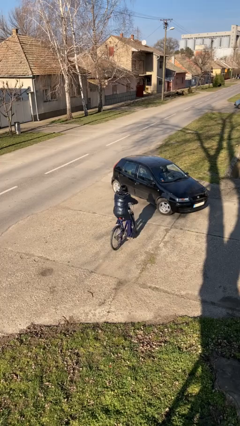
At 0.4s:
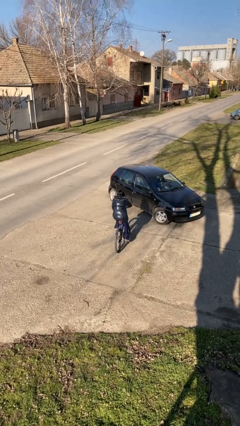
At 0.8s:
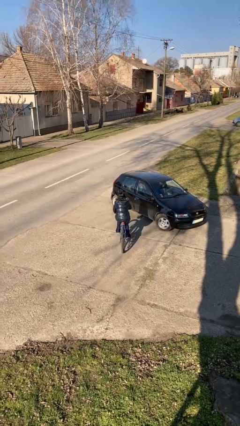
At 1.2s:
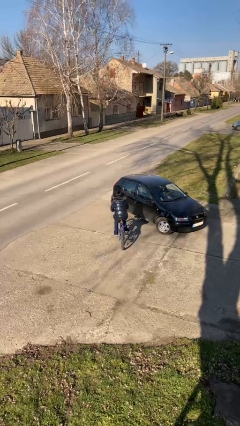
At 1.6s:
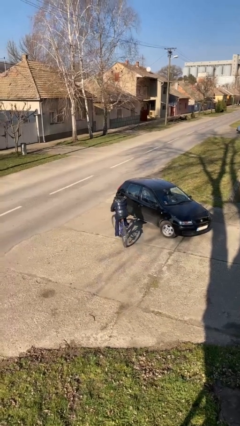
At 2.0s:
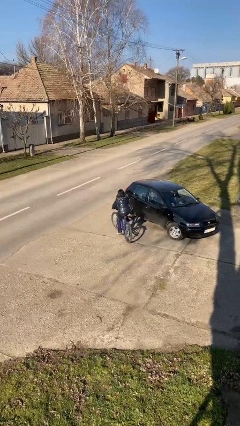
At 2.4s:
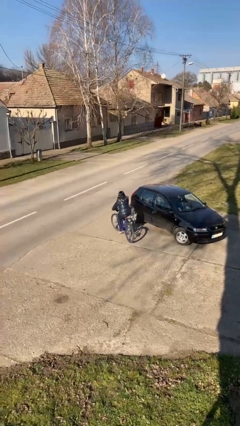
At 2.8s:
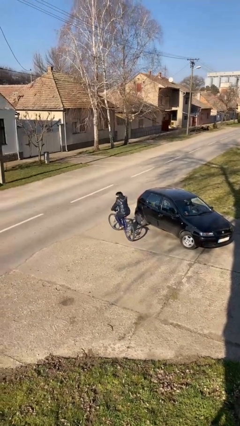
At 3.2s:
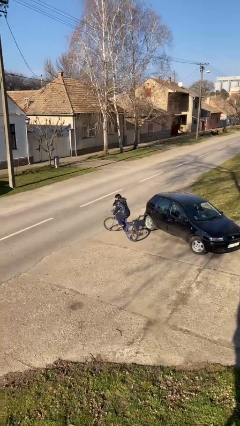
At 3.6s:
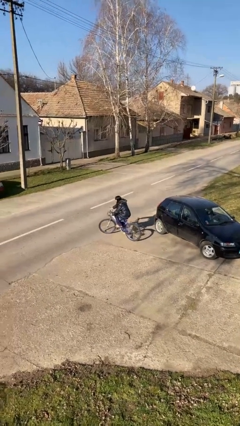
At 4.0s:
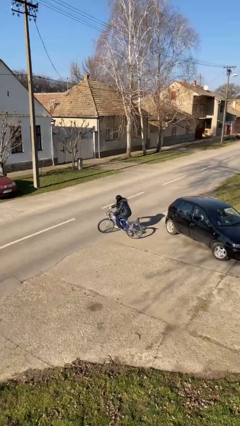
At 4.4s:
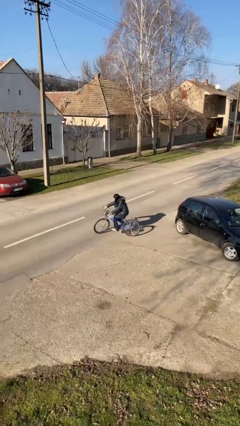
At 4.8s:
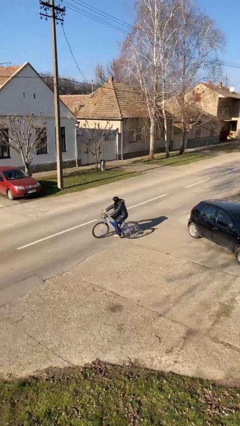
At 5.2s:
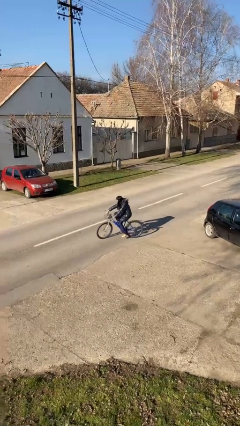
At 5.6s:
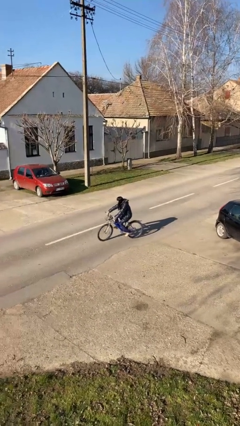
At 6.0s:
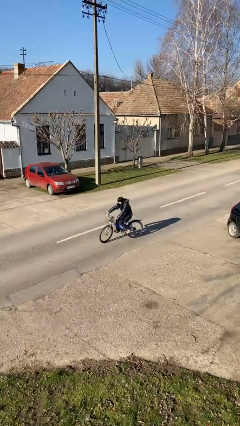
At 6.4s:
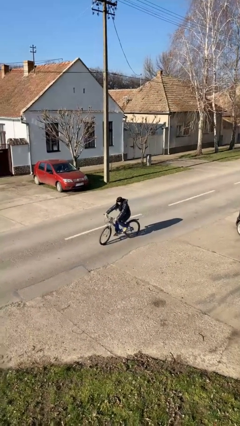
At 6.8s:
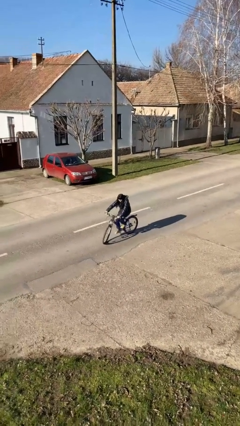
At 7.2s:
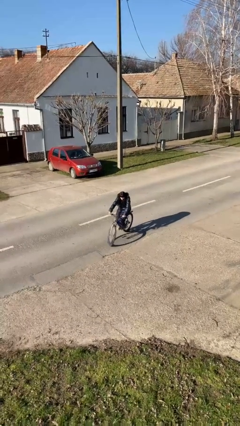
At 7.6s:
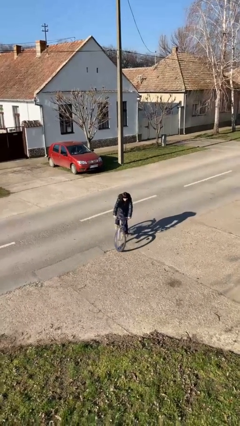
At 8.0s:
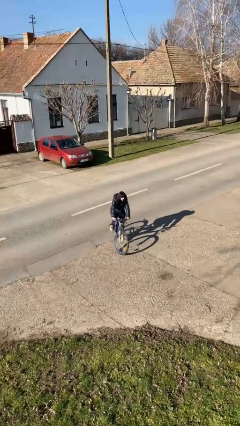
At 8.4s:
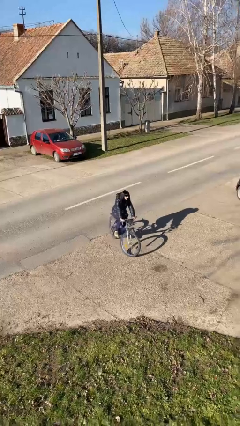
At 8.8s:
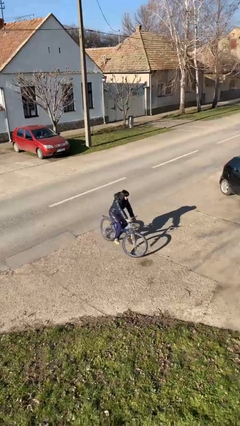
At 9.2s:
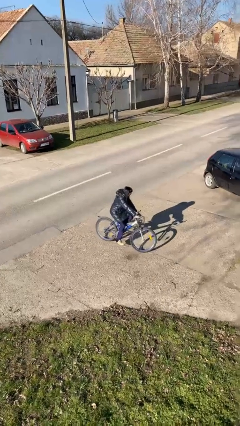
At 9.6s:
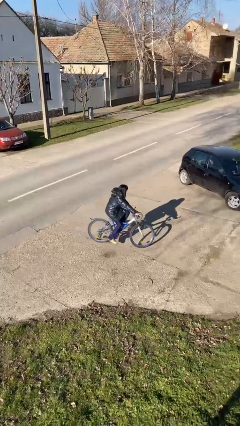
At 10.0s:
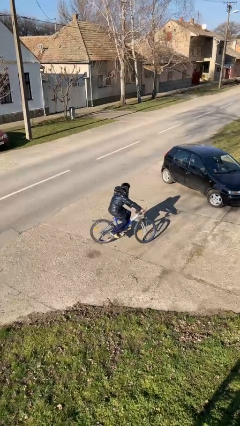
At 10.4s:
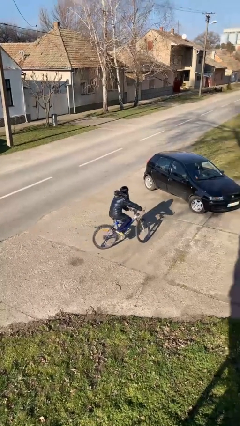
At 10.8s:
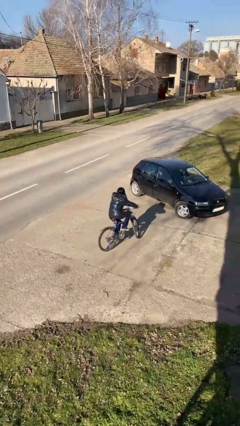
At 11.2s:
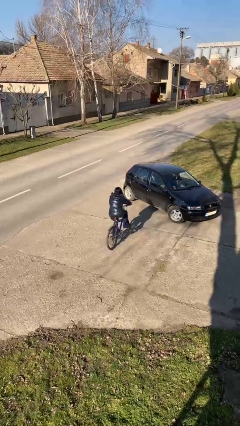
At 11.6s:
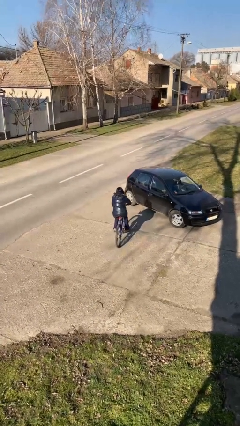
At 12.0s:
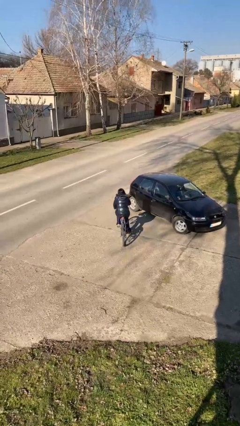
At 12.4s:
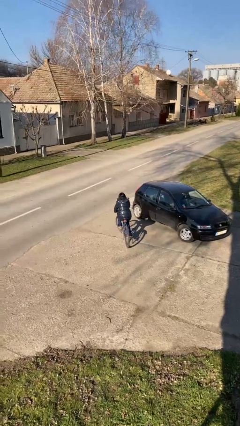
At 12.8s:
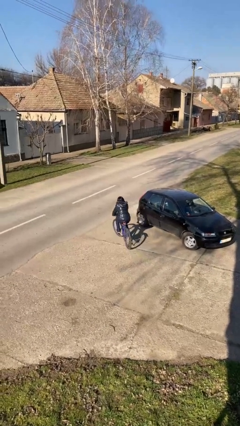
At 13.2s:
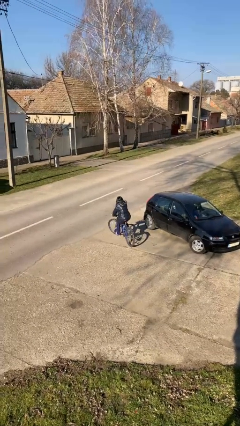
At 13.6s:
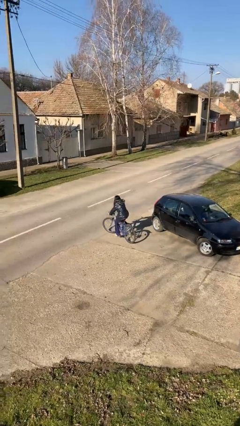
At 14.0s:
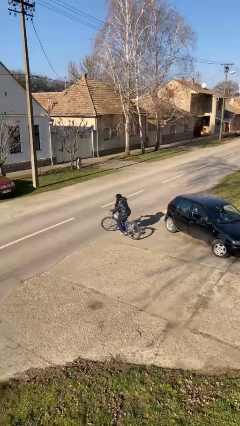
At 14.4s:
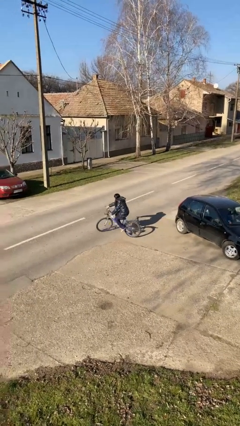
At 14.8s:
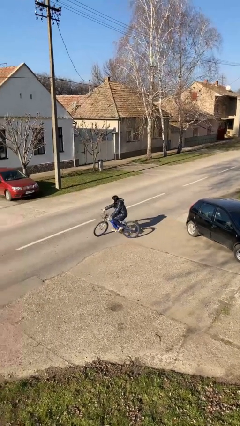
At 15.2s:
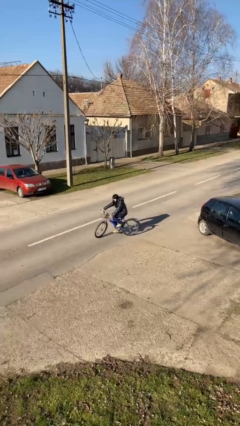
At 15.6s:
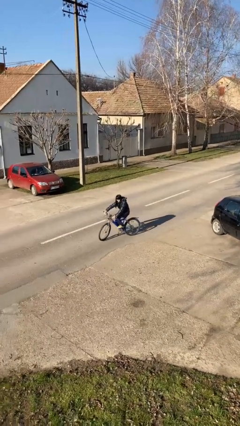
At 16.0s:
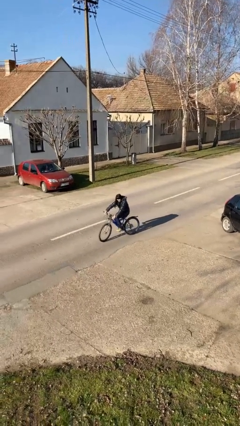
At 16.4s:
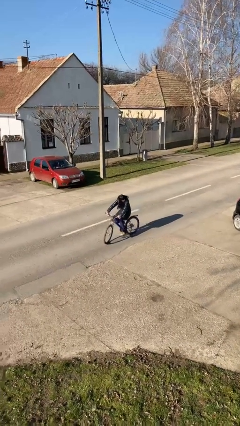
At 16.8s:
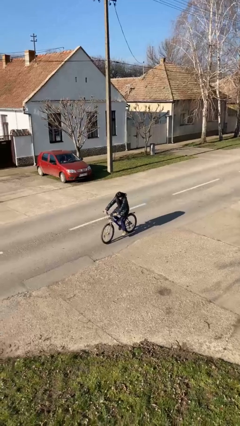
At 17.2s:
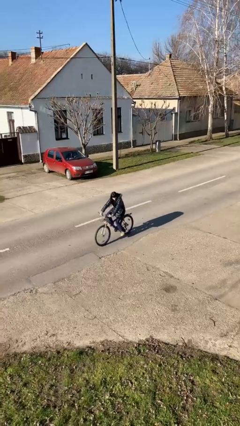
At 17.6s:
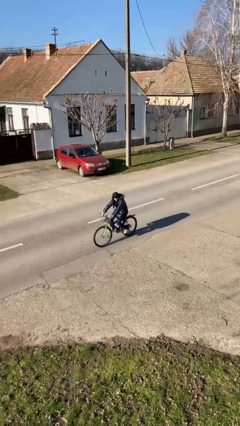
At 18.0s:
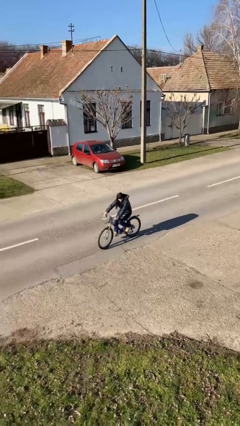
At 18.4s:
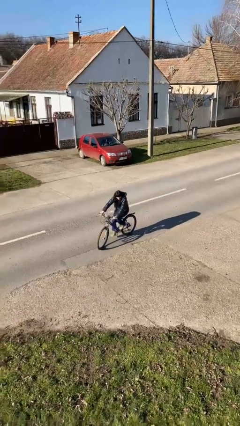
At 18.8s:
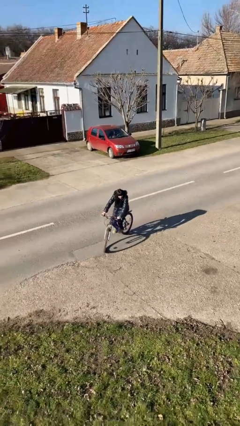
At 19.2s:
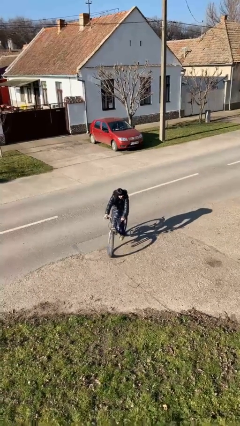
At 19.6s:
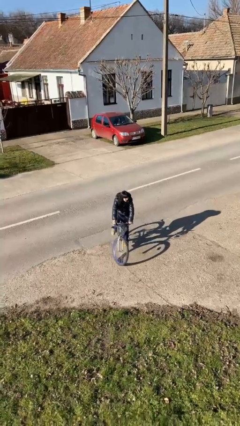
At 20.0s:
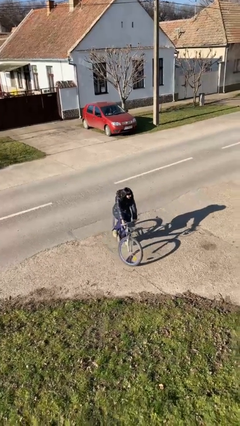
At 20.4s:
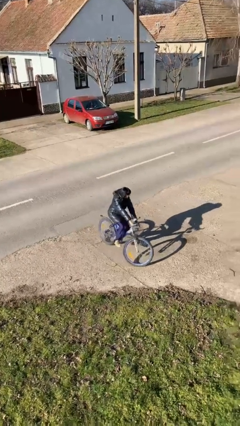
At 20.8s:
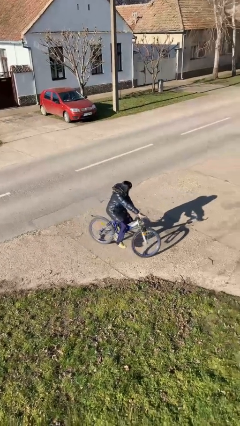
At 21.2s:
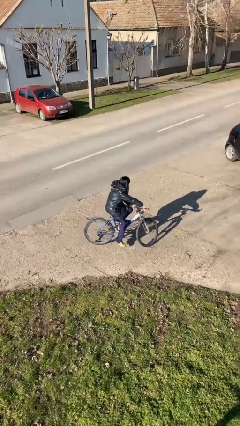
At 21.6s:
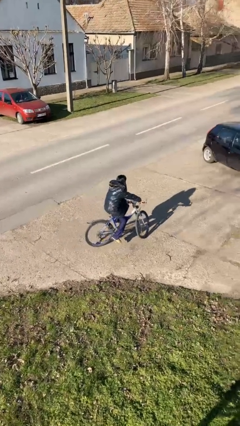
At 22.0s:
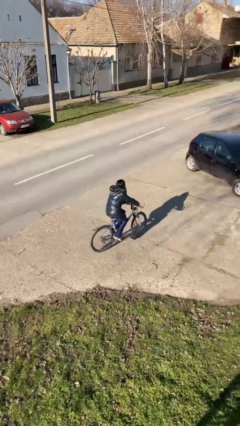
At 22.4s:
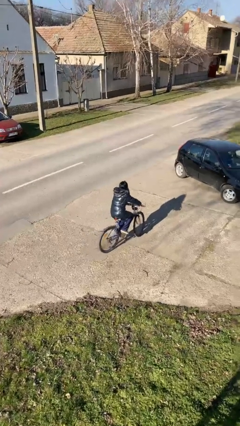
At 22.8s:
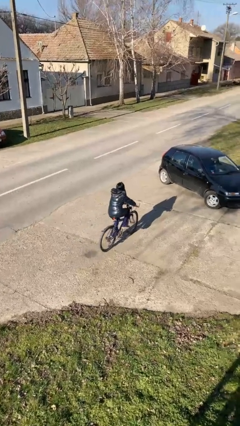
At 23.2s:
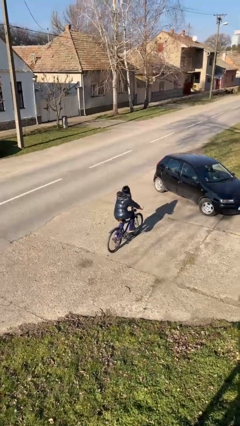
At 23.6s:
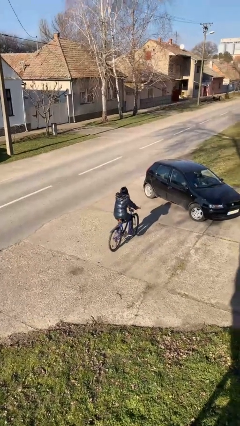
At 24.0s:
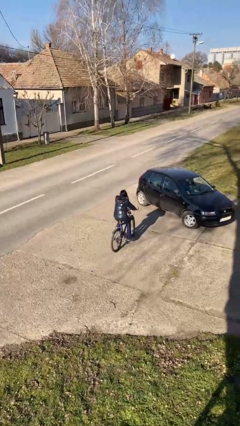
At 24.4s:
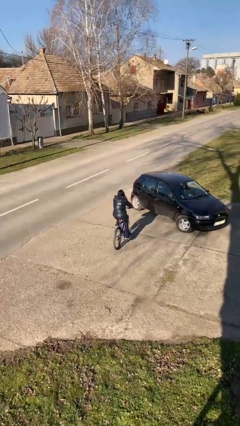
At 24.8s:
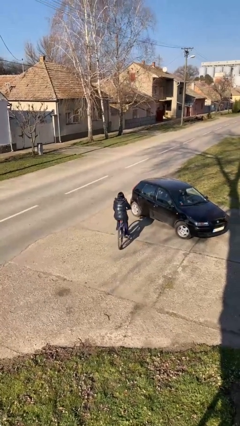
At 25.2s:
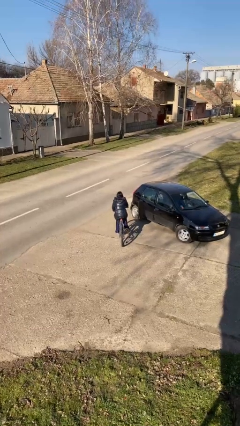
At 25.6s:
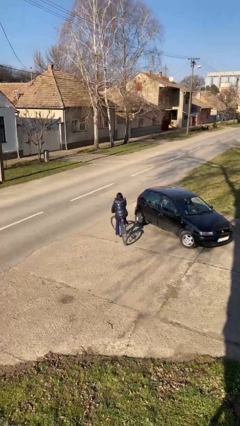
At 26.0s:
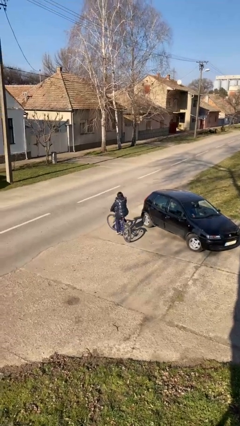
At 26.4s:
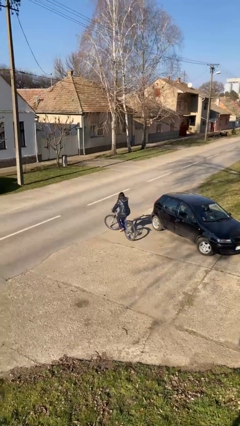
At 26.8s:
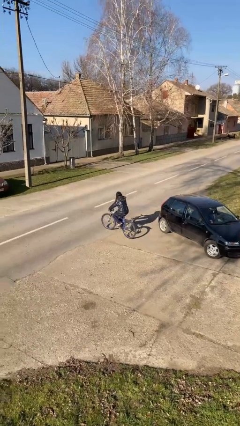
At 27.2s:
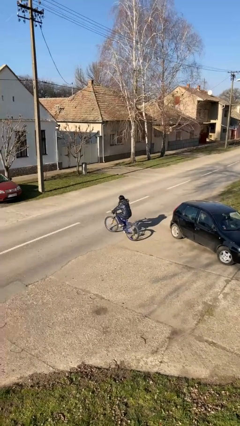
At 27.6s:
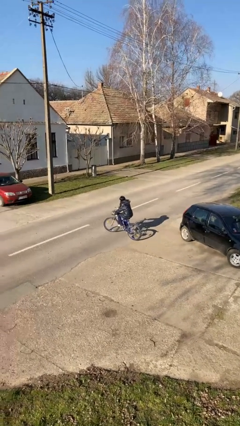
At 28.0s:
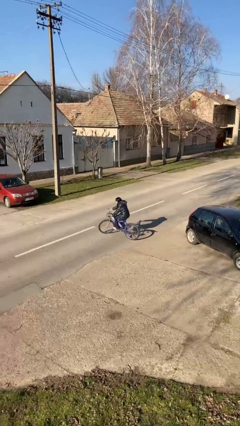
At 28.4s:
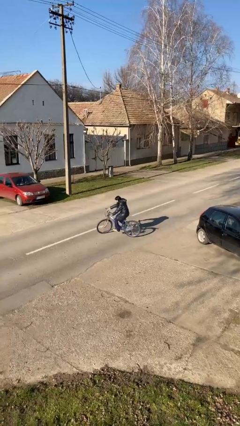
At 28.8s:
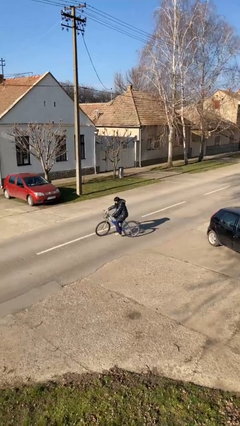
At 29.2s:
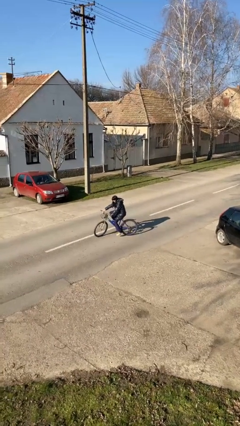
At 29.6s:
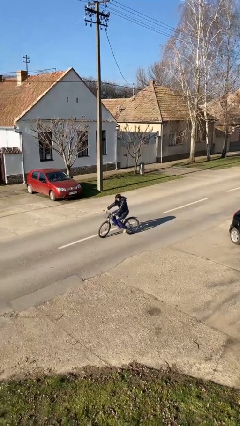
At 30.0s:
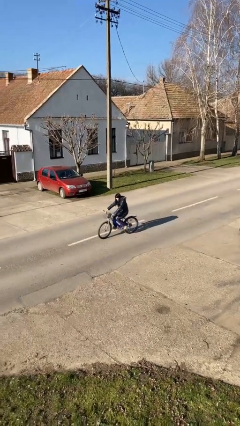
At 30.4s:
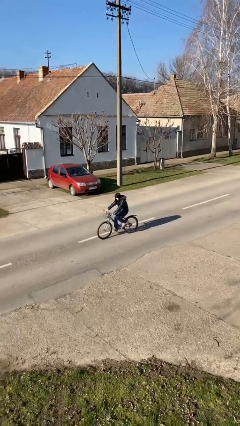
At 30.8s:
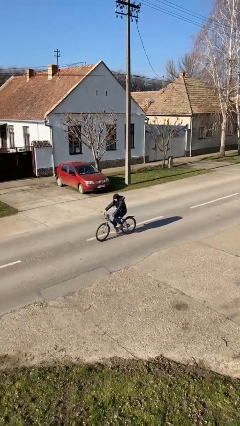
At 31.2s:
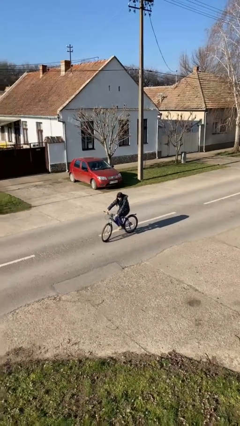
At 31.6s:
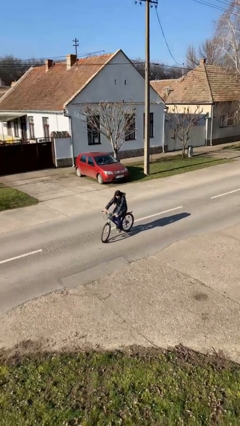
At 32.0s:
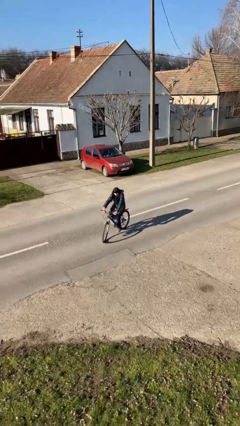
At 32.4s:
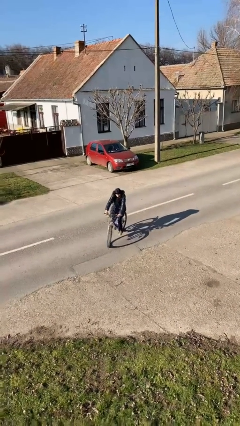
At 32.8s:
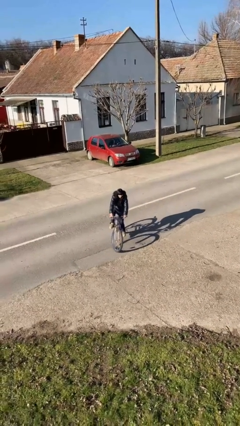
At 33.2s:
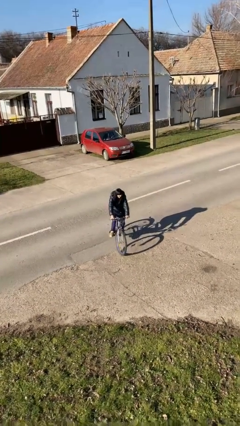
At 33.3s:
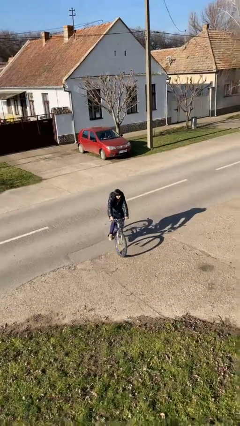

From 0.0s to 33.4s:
person rides bicycle

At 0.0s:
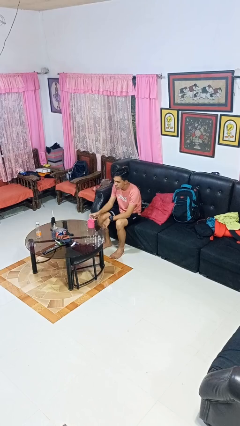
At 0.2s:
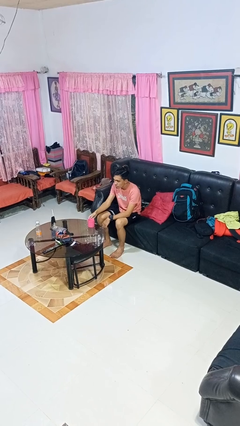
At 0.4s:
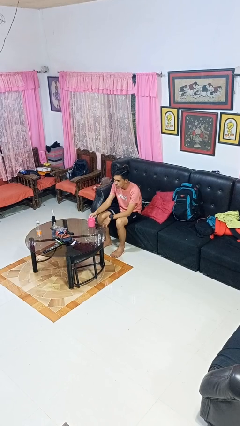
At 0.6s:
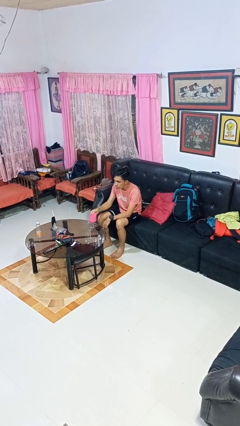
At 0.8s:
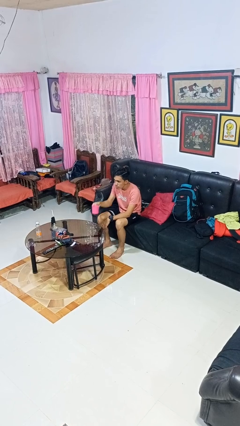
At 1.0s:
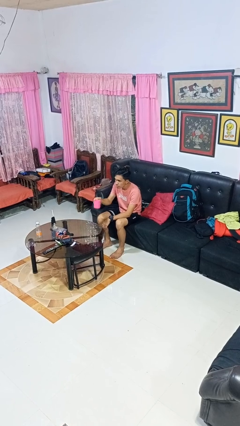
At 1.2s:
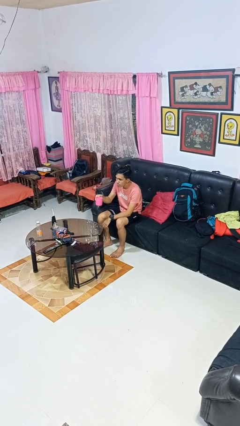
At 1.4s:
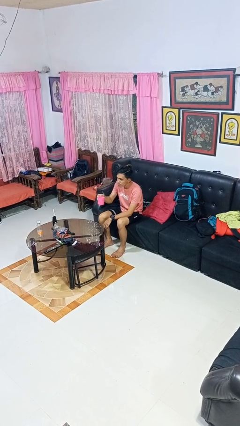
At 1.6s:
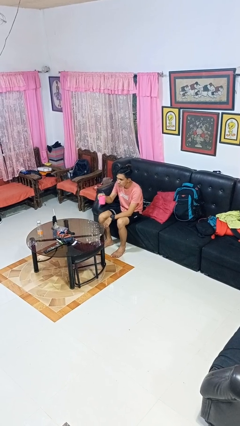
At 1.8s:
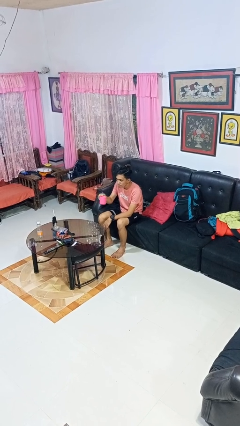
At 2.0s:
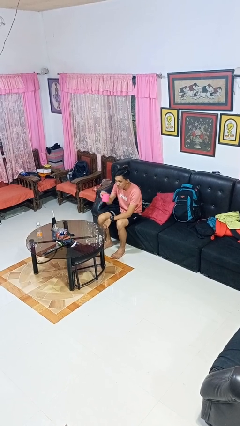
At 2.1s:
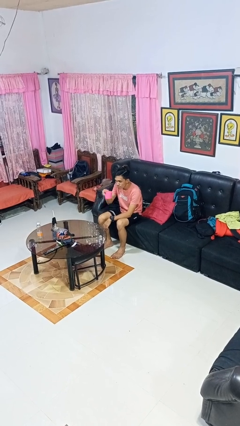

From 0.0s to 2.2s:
person picks up object from table
